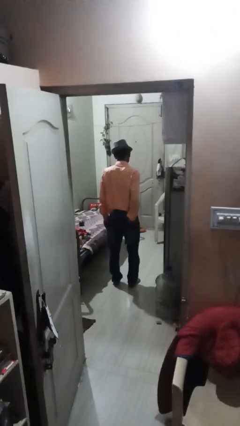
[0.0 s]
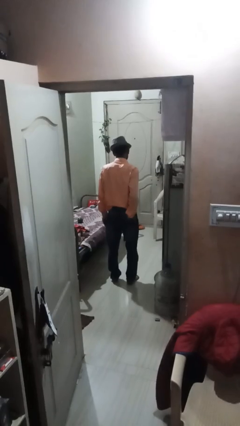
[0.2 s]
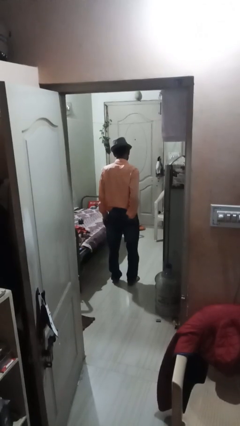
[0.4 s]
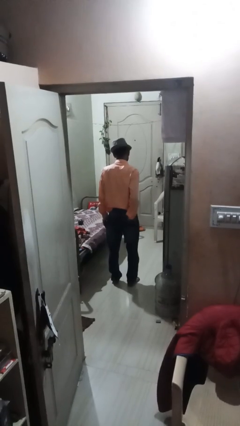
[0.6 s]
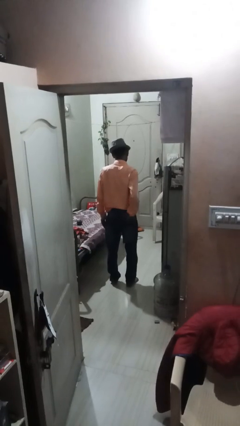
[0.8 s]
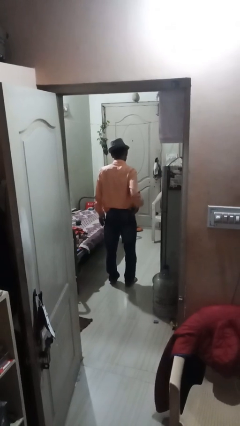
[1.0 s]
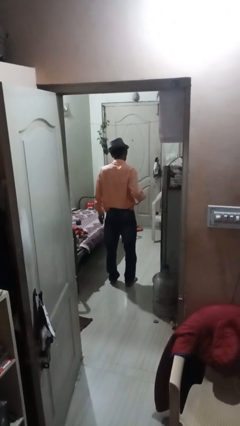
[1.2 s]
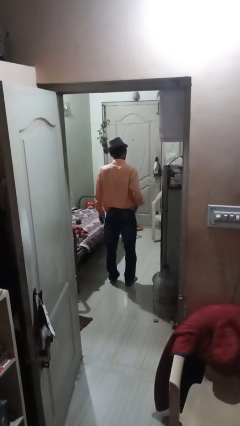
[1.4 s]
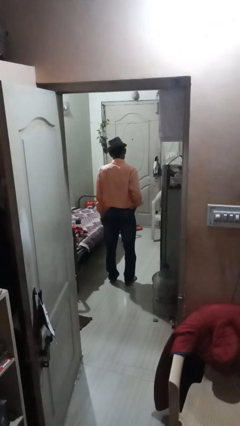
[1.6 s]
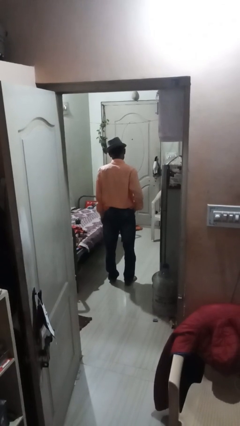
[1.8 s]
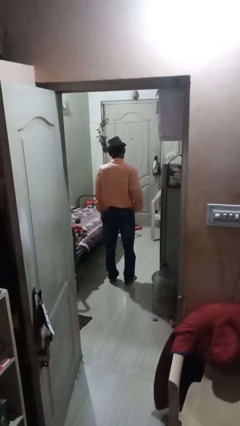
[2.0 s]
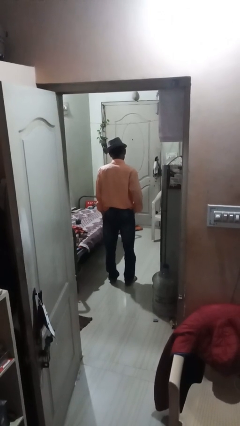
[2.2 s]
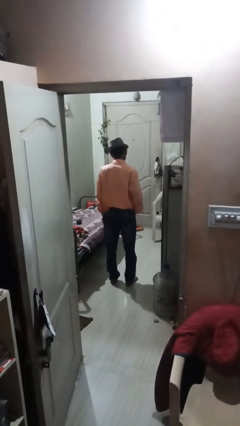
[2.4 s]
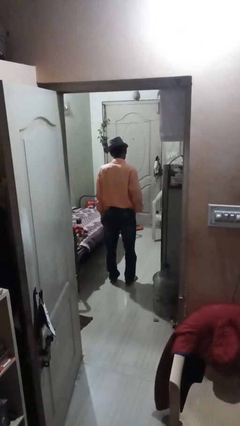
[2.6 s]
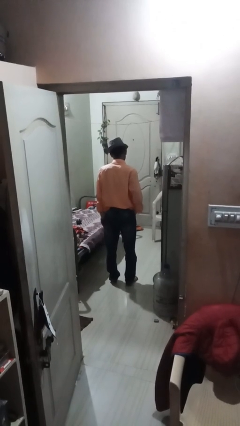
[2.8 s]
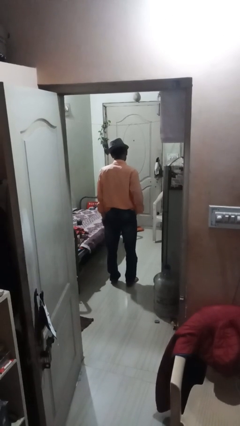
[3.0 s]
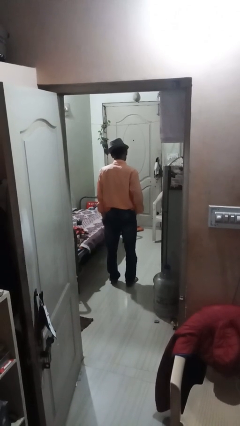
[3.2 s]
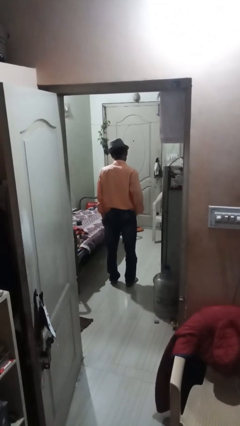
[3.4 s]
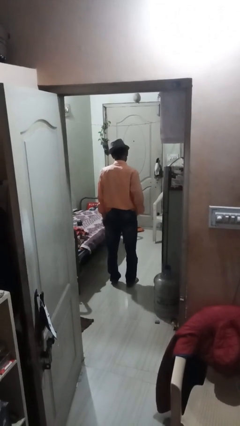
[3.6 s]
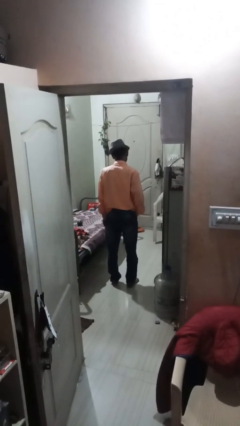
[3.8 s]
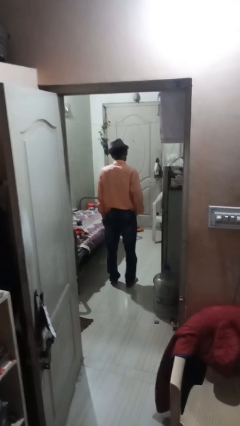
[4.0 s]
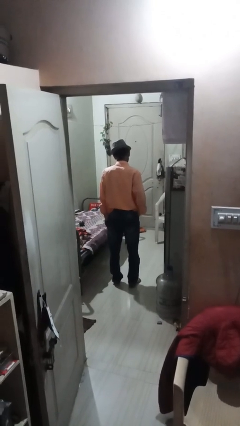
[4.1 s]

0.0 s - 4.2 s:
person puts hands in back pockets

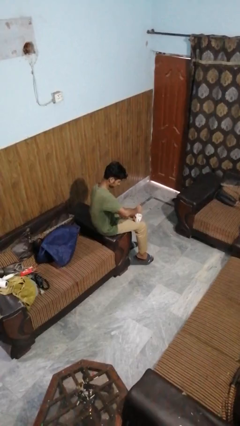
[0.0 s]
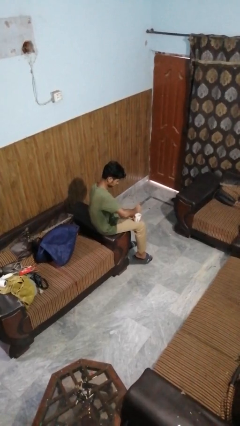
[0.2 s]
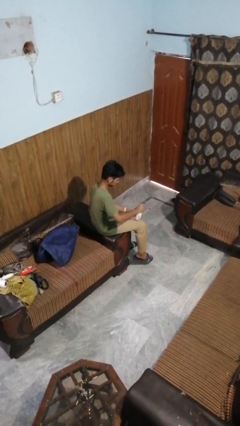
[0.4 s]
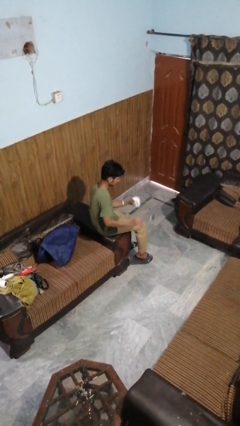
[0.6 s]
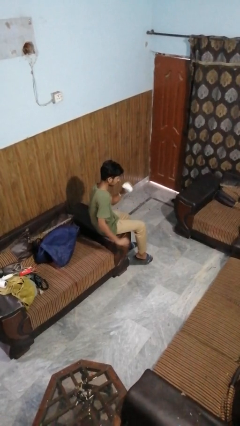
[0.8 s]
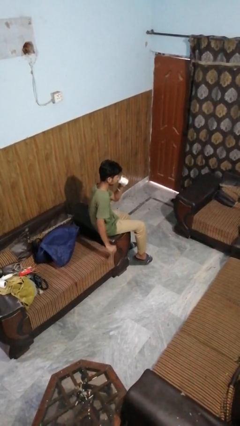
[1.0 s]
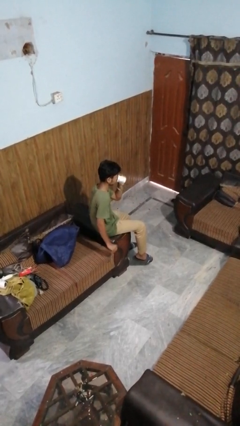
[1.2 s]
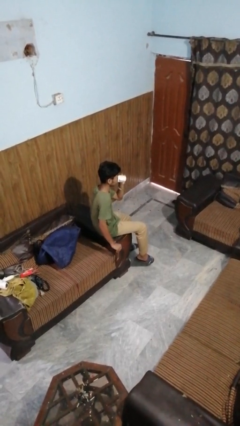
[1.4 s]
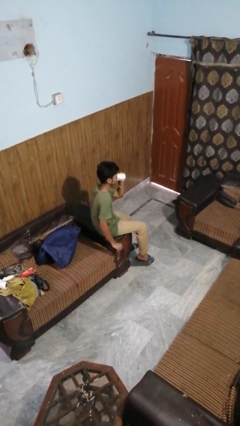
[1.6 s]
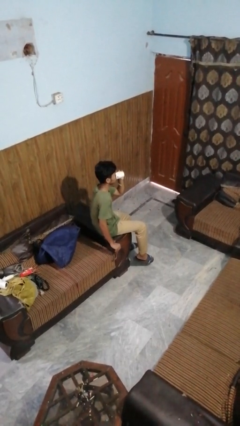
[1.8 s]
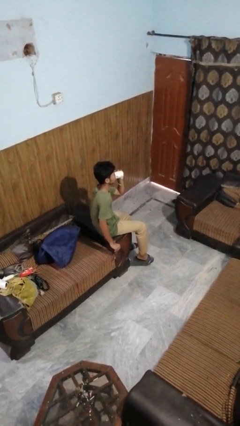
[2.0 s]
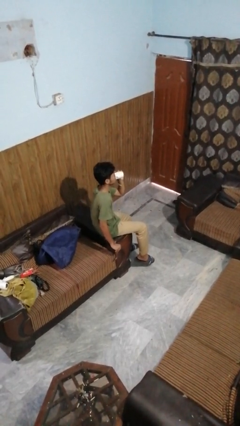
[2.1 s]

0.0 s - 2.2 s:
person drinks from mug

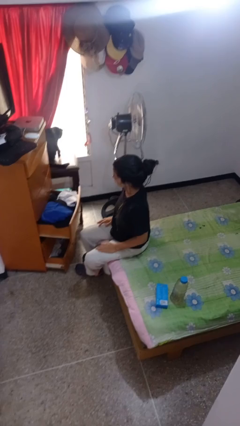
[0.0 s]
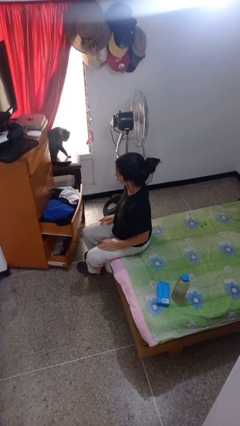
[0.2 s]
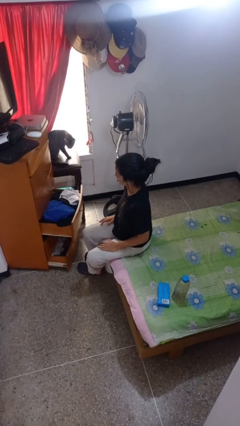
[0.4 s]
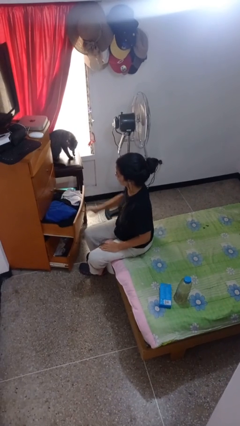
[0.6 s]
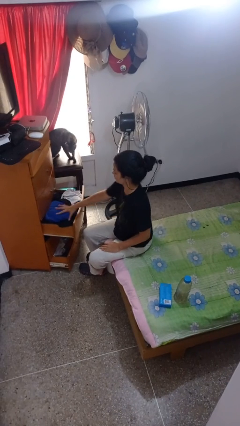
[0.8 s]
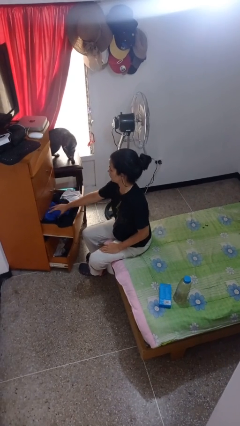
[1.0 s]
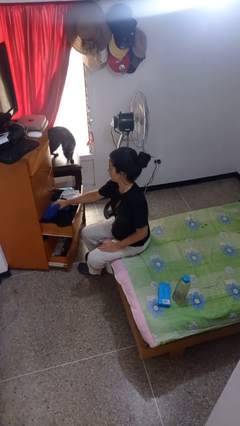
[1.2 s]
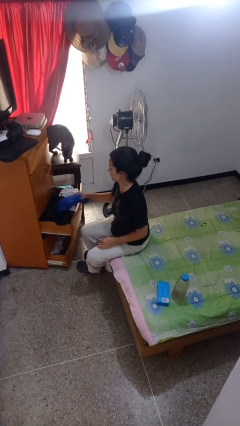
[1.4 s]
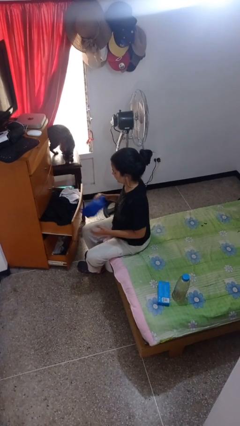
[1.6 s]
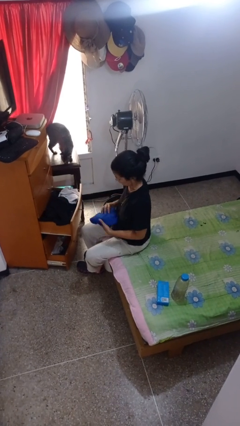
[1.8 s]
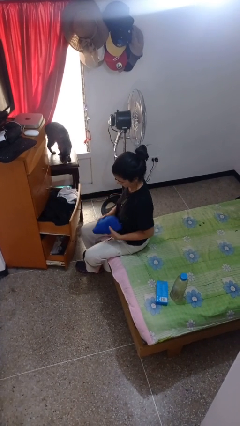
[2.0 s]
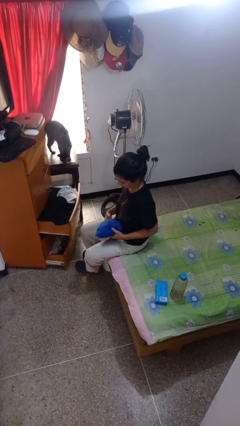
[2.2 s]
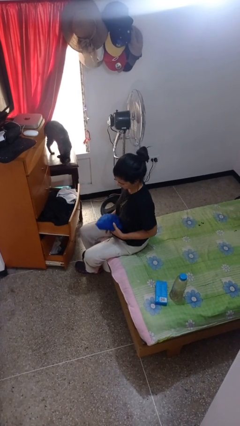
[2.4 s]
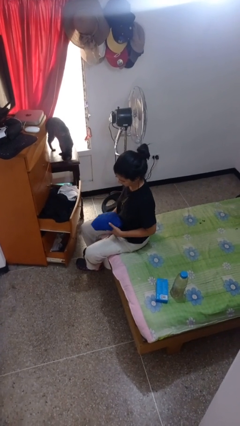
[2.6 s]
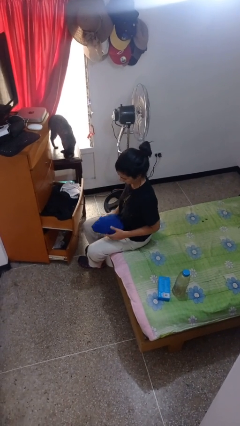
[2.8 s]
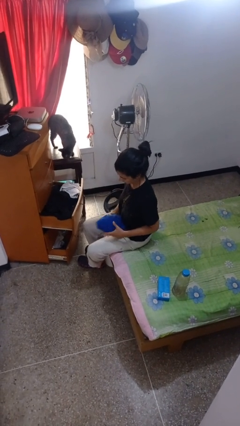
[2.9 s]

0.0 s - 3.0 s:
person takes clothes from dresser

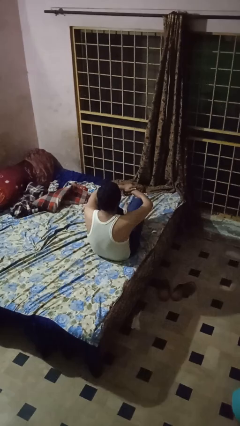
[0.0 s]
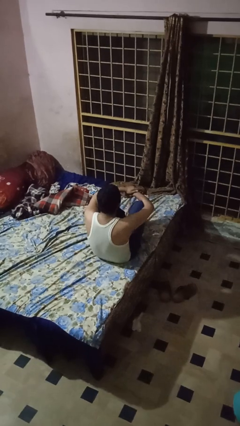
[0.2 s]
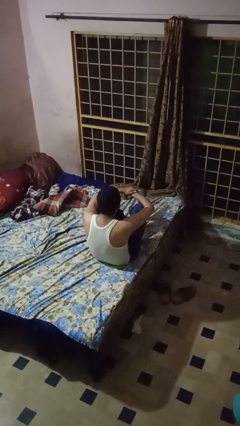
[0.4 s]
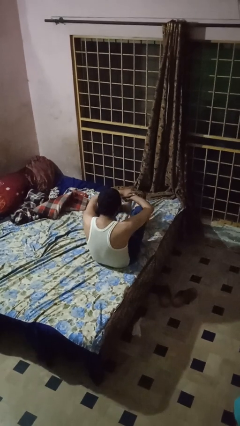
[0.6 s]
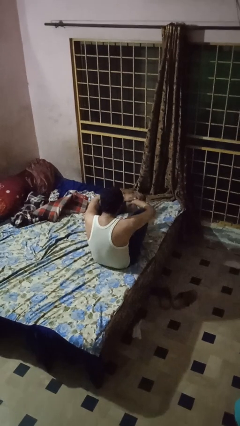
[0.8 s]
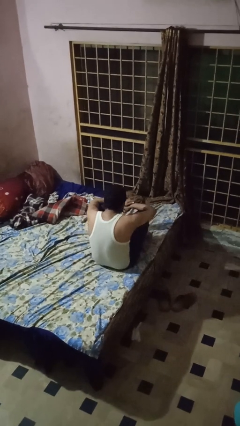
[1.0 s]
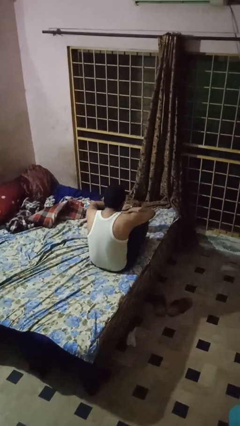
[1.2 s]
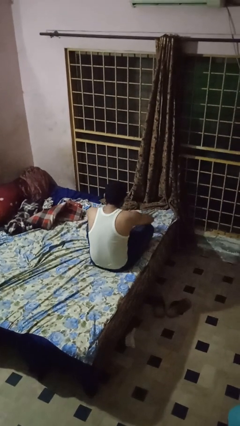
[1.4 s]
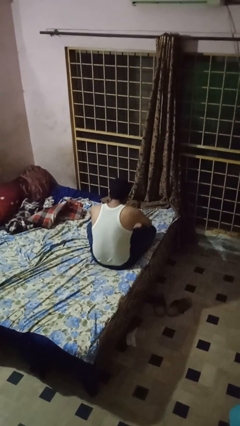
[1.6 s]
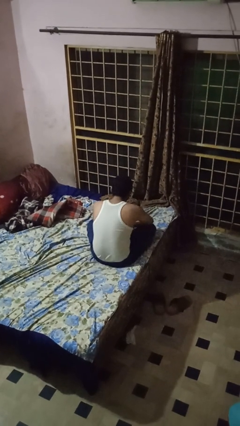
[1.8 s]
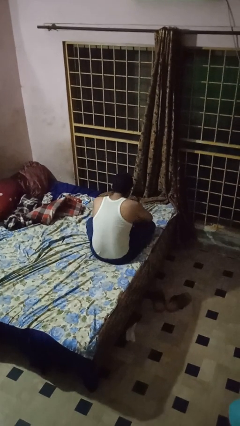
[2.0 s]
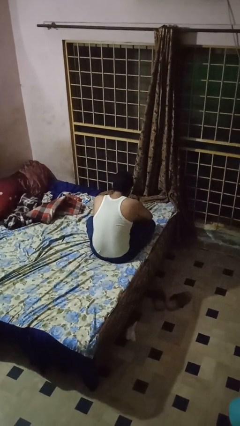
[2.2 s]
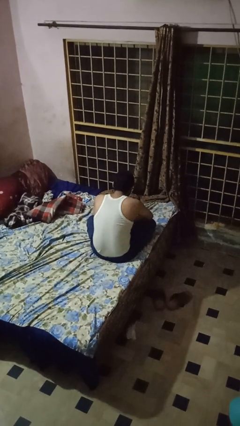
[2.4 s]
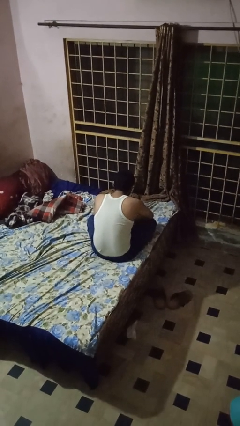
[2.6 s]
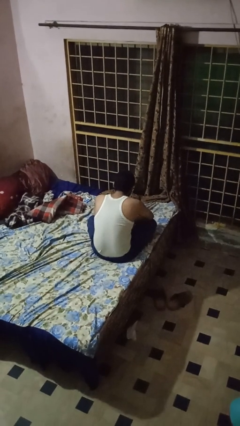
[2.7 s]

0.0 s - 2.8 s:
person crosses legs

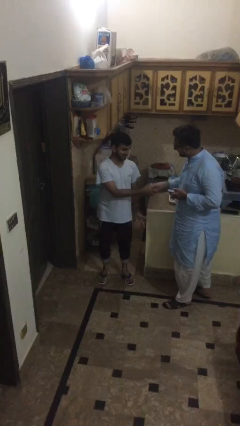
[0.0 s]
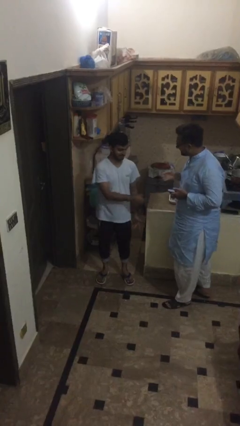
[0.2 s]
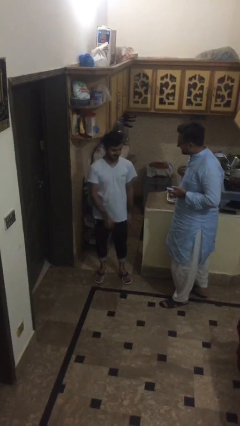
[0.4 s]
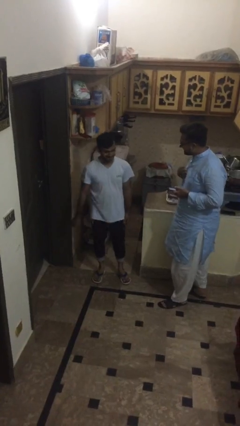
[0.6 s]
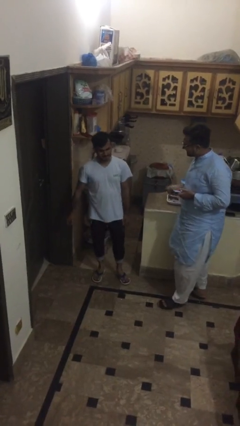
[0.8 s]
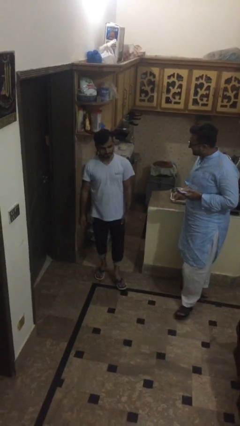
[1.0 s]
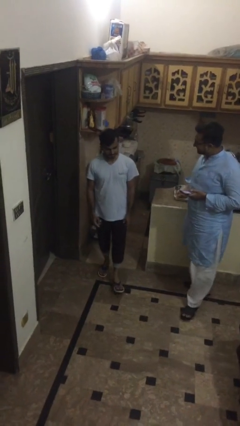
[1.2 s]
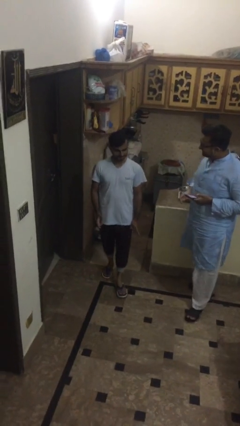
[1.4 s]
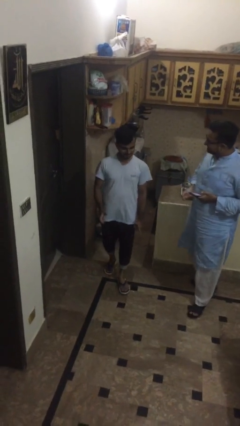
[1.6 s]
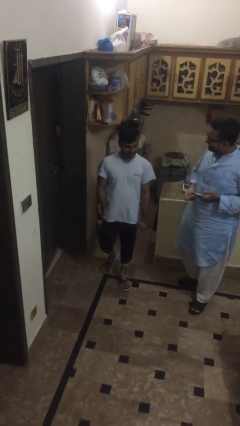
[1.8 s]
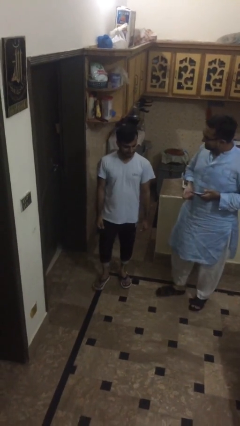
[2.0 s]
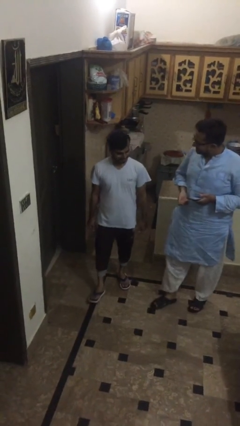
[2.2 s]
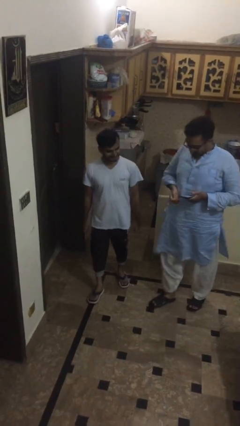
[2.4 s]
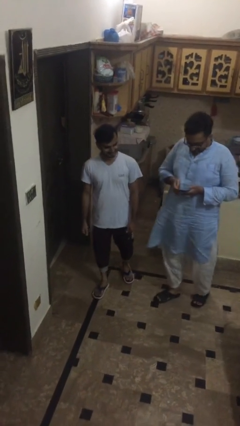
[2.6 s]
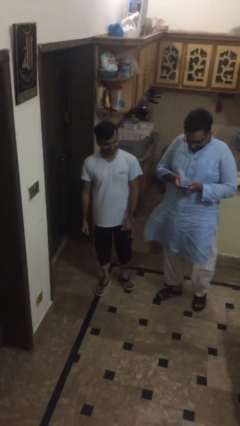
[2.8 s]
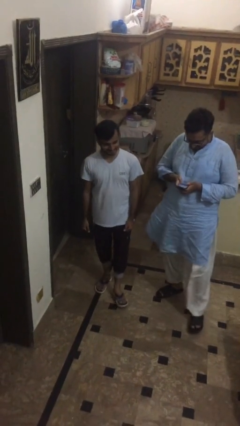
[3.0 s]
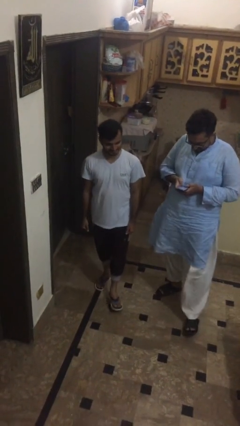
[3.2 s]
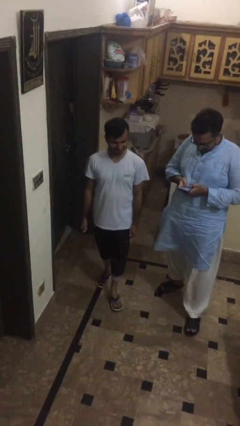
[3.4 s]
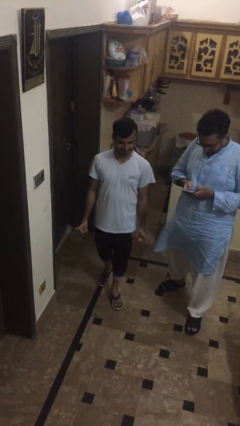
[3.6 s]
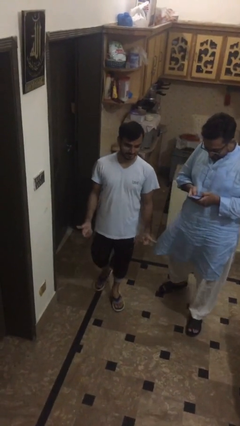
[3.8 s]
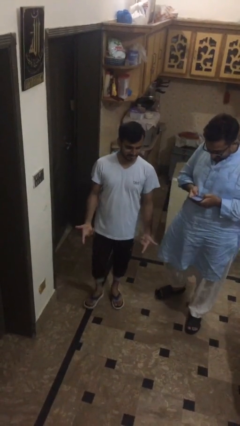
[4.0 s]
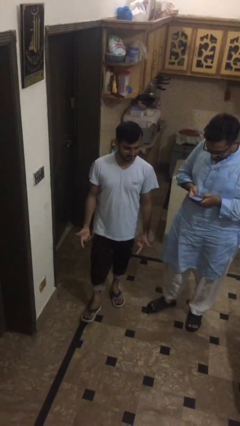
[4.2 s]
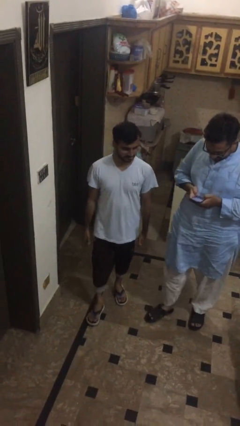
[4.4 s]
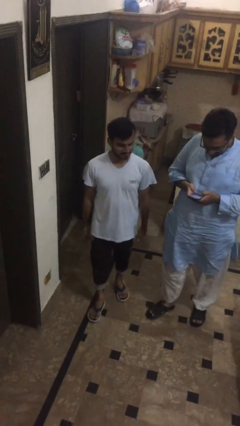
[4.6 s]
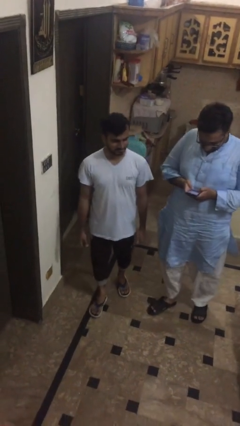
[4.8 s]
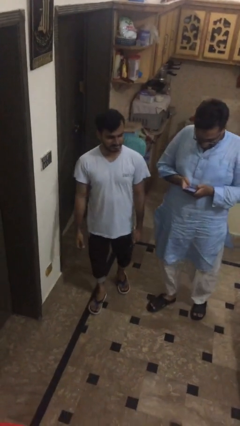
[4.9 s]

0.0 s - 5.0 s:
person talks to person
